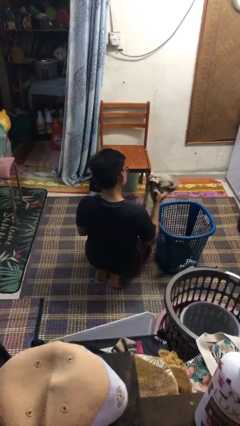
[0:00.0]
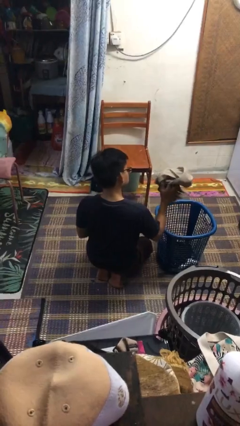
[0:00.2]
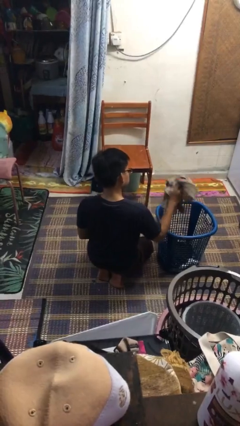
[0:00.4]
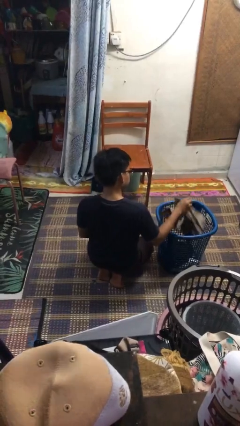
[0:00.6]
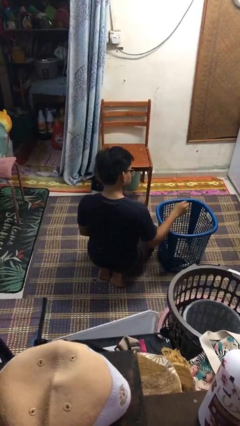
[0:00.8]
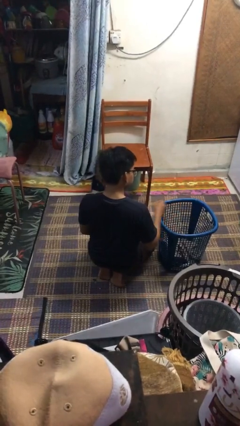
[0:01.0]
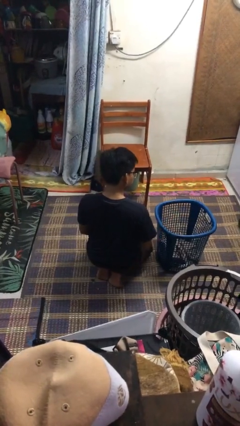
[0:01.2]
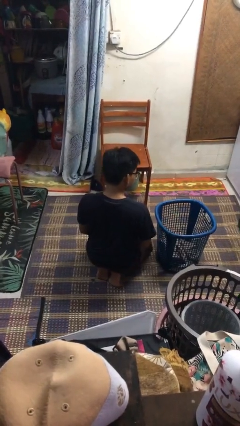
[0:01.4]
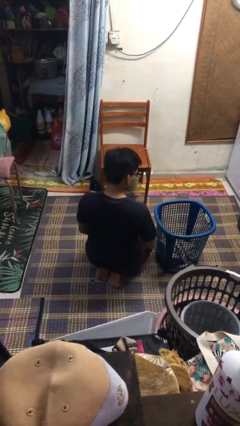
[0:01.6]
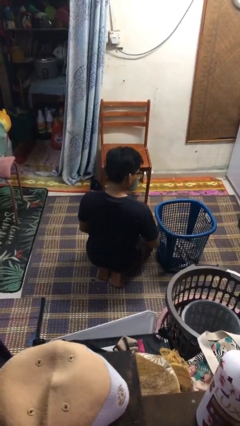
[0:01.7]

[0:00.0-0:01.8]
person puts object into basket

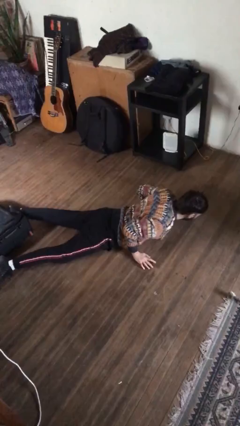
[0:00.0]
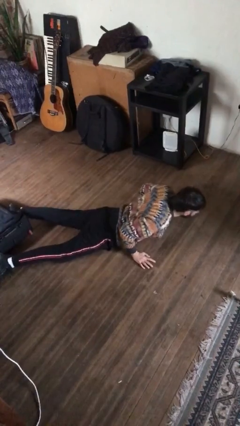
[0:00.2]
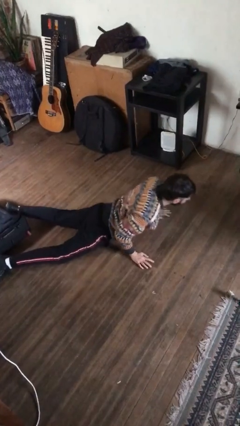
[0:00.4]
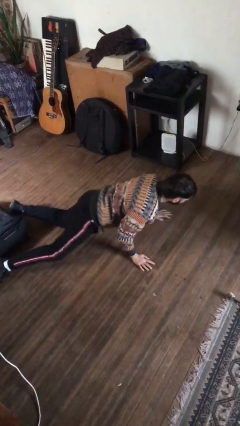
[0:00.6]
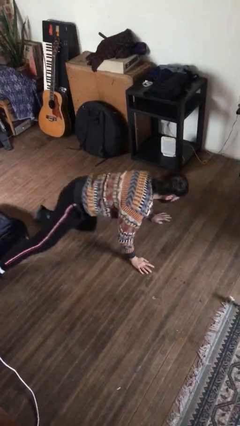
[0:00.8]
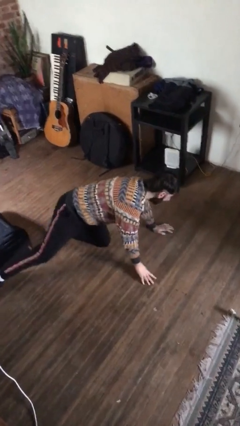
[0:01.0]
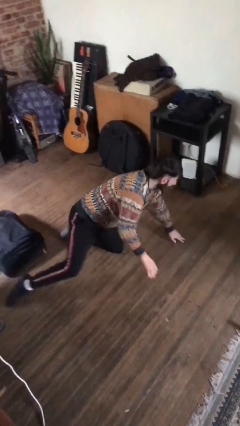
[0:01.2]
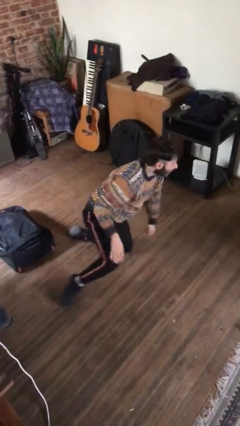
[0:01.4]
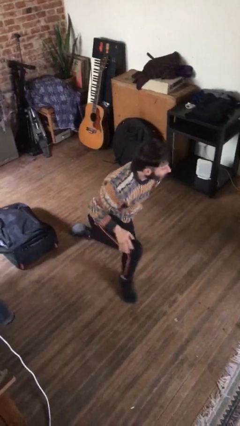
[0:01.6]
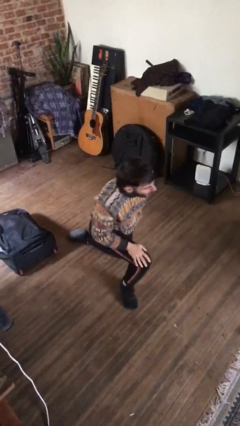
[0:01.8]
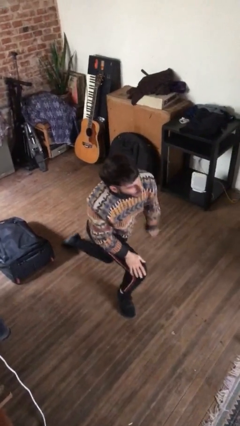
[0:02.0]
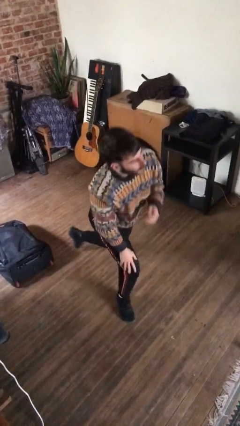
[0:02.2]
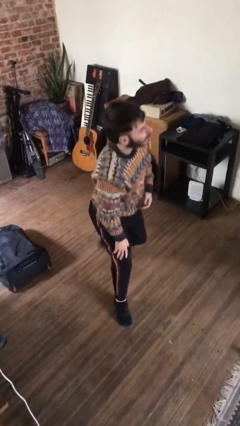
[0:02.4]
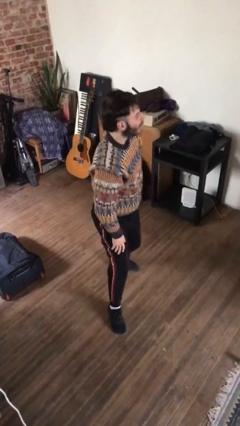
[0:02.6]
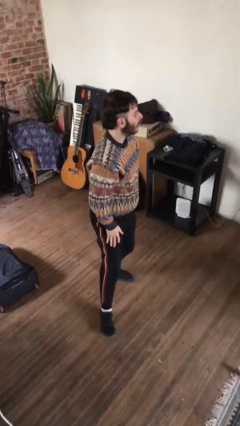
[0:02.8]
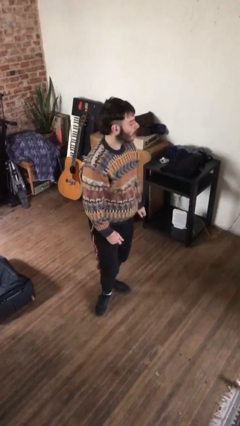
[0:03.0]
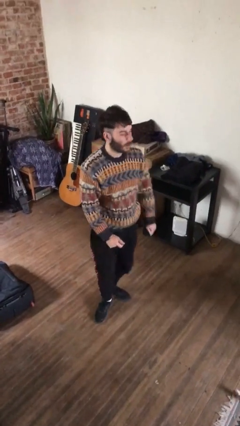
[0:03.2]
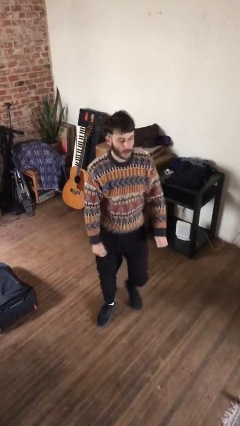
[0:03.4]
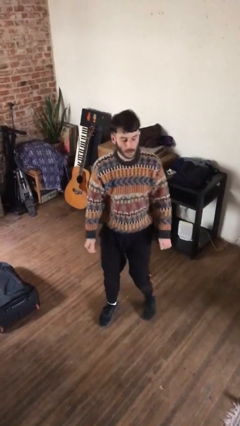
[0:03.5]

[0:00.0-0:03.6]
person stands up from floor

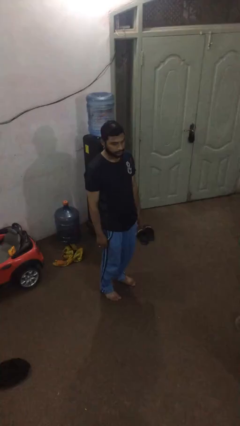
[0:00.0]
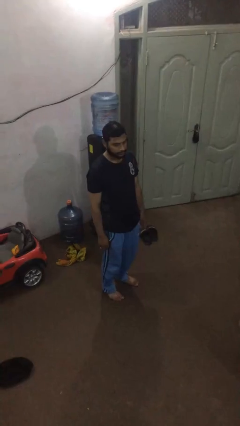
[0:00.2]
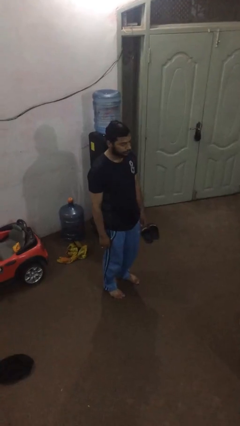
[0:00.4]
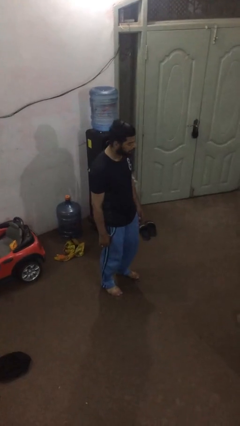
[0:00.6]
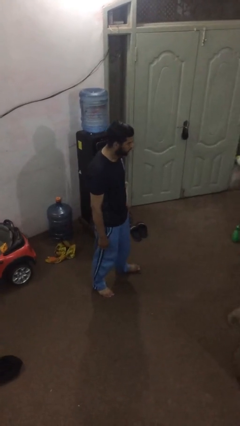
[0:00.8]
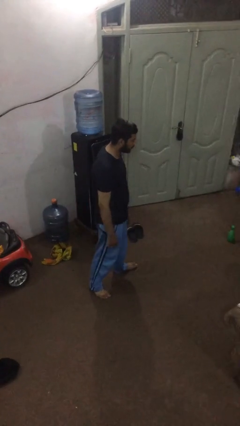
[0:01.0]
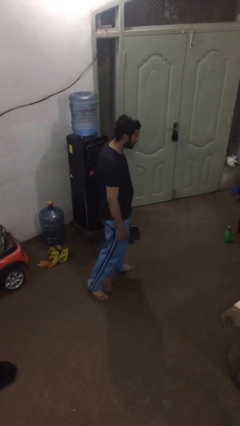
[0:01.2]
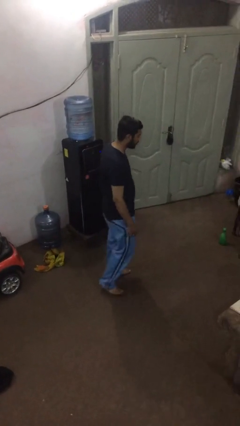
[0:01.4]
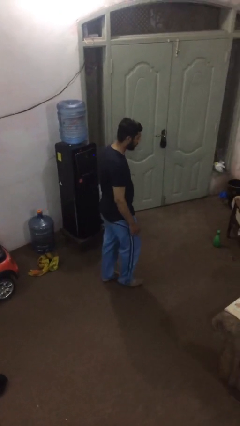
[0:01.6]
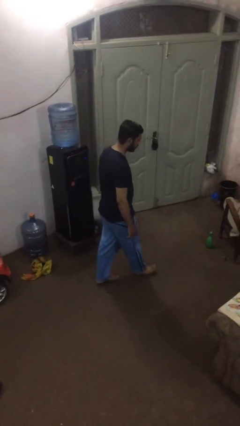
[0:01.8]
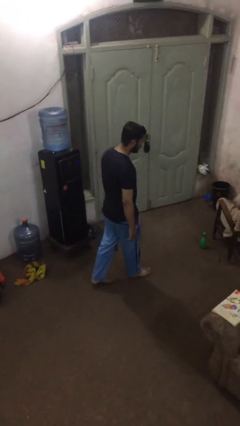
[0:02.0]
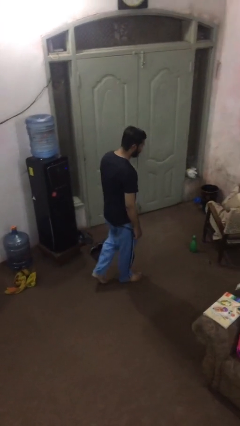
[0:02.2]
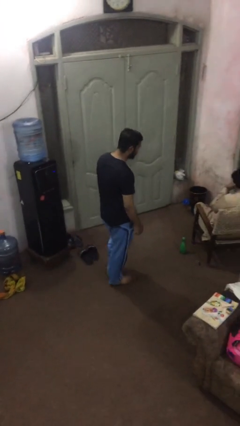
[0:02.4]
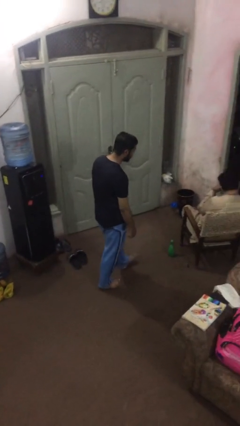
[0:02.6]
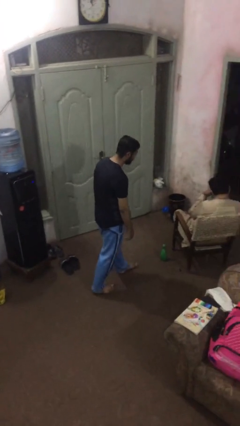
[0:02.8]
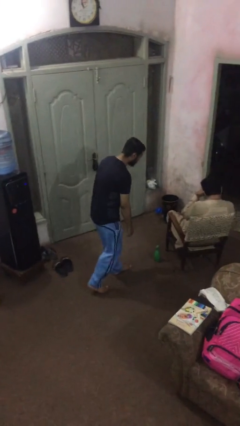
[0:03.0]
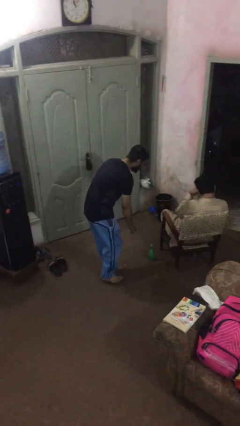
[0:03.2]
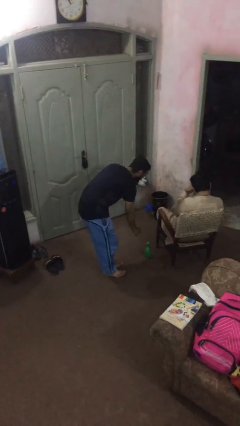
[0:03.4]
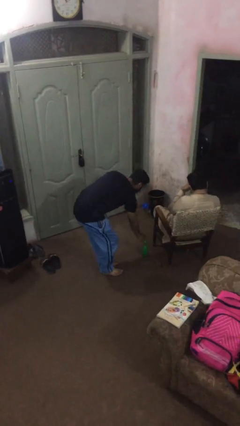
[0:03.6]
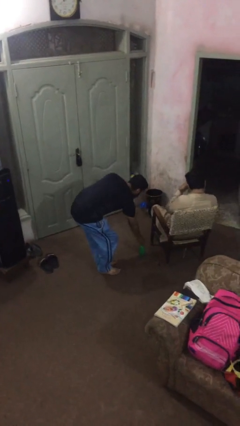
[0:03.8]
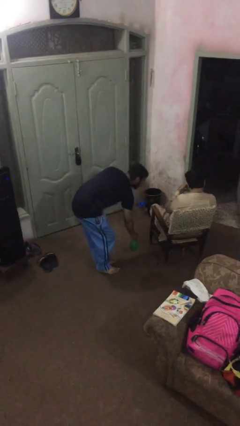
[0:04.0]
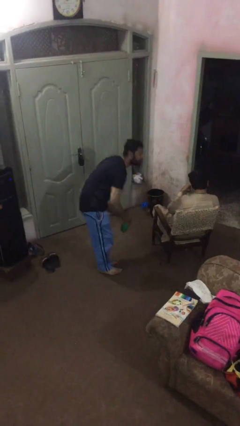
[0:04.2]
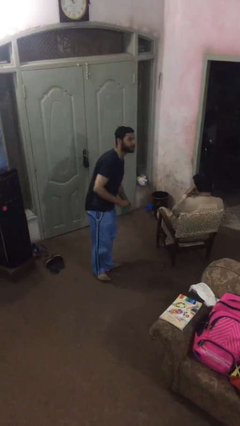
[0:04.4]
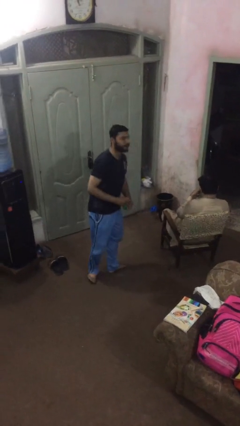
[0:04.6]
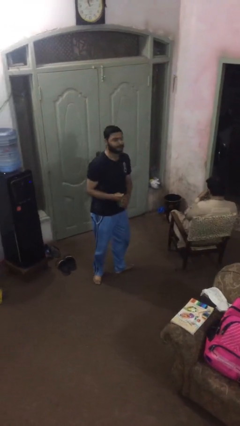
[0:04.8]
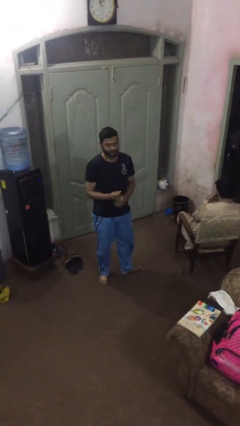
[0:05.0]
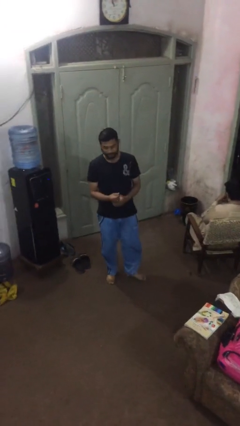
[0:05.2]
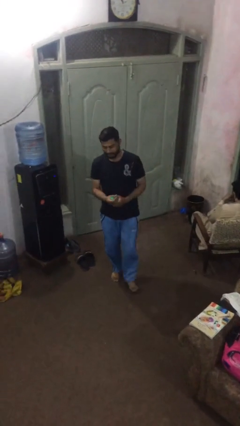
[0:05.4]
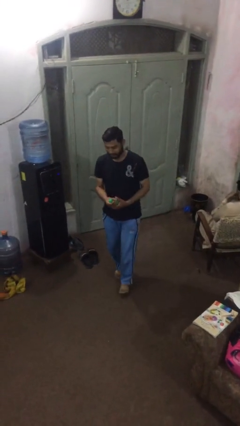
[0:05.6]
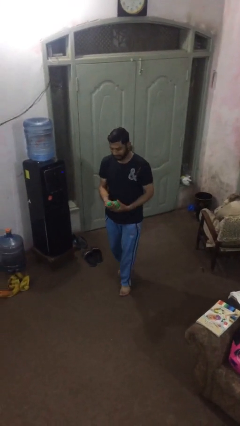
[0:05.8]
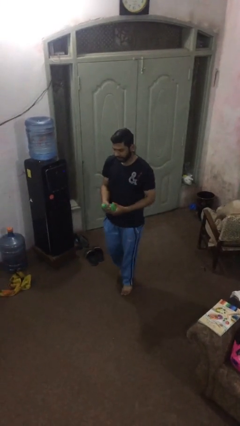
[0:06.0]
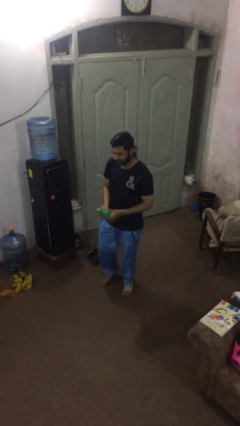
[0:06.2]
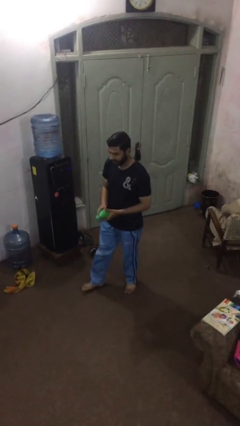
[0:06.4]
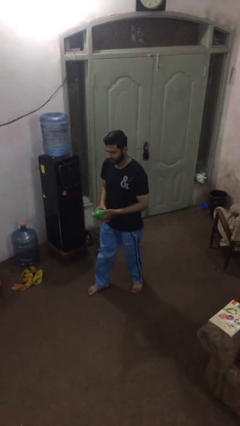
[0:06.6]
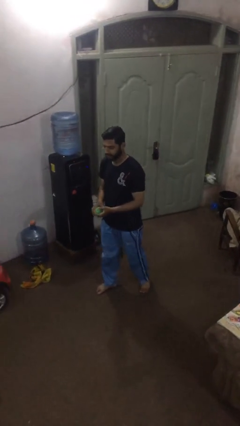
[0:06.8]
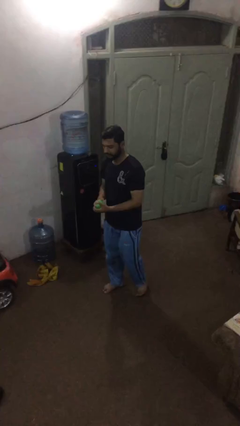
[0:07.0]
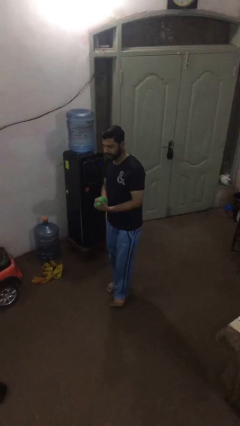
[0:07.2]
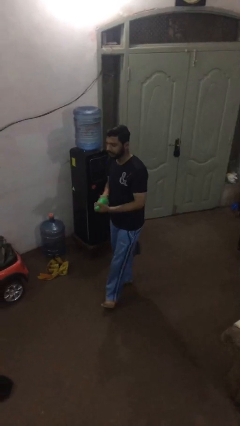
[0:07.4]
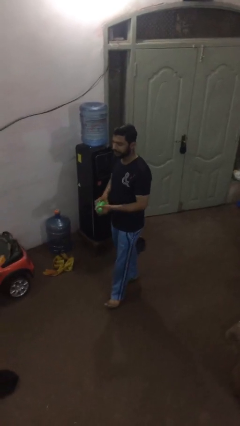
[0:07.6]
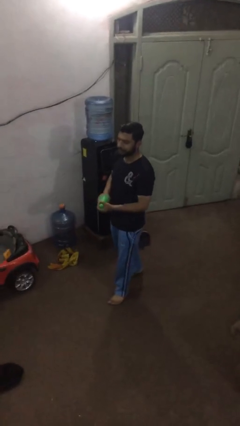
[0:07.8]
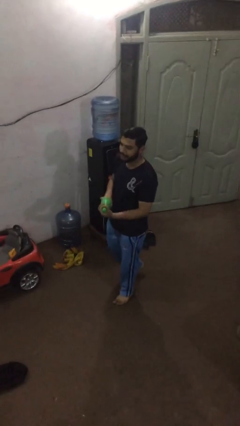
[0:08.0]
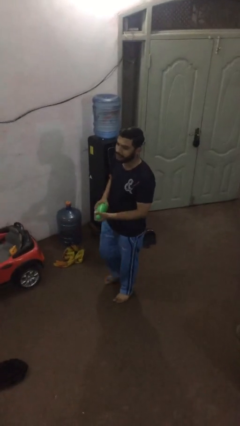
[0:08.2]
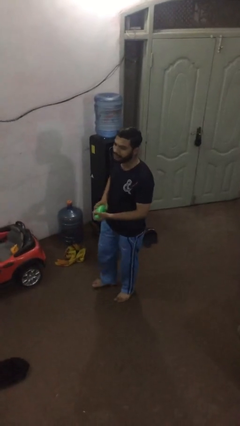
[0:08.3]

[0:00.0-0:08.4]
person steals object from person

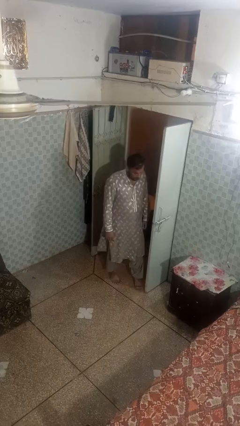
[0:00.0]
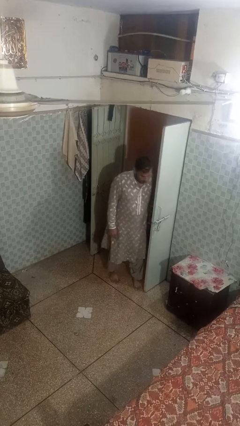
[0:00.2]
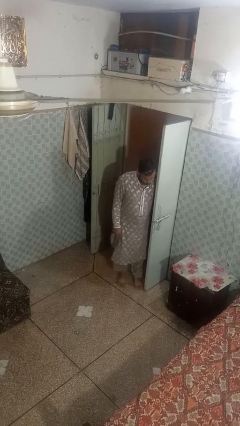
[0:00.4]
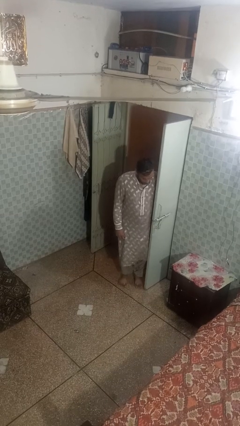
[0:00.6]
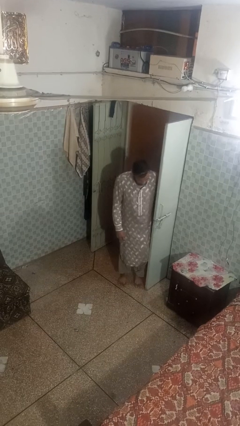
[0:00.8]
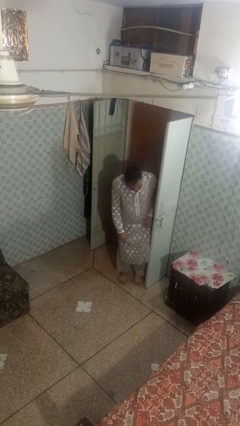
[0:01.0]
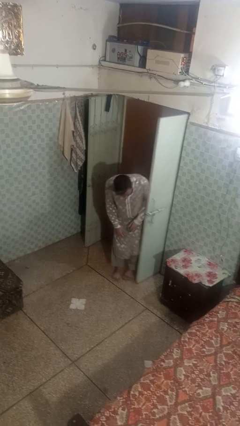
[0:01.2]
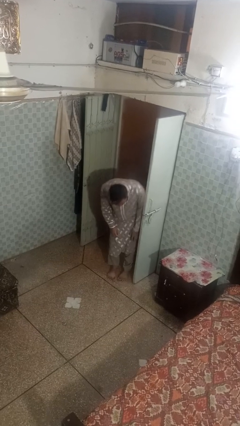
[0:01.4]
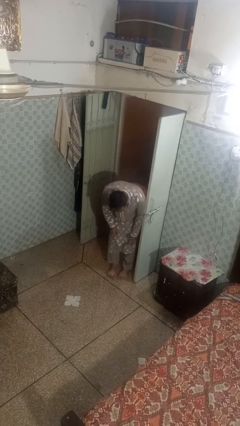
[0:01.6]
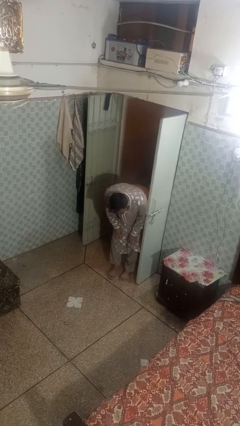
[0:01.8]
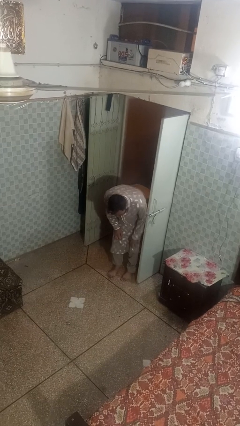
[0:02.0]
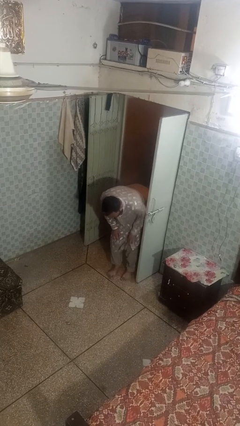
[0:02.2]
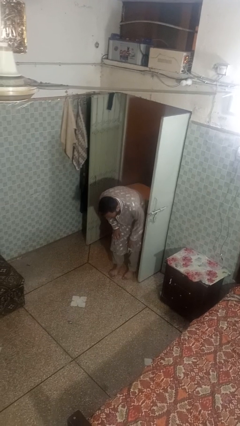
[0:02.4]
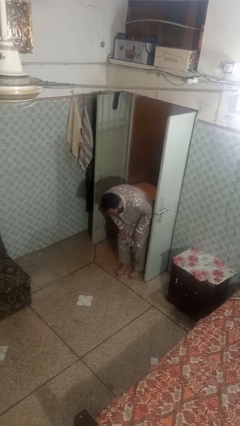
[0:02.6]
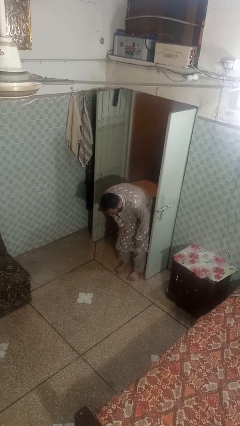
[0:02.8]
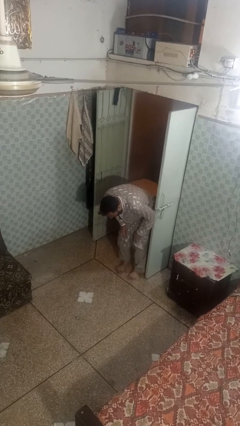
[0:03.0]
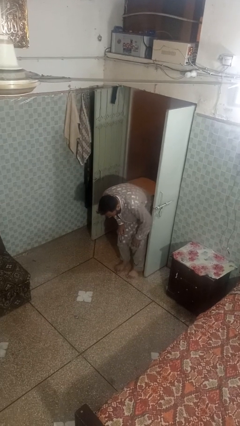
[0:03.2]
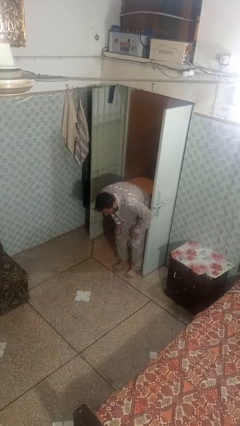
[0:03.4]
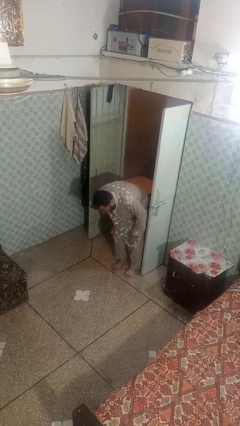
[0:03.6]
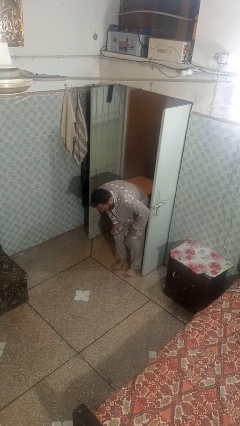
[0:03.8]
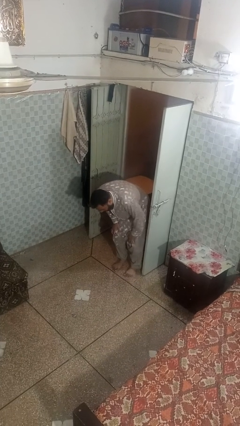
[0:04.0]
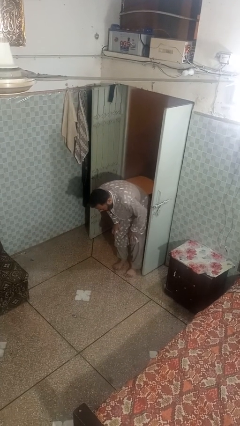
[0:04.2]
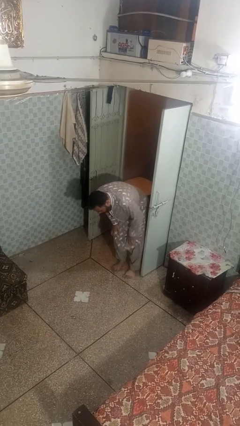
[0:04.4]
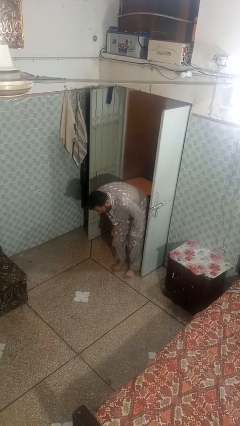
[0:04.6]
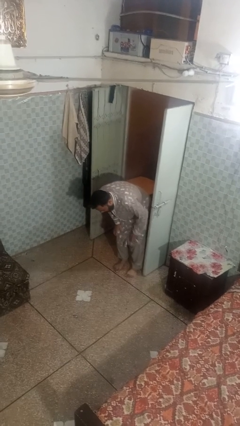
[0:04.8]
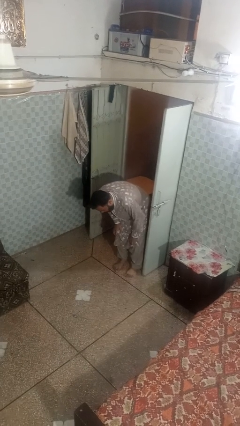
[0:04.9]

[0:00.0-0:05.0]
person trips on object on floor
